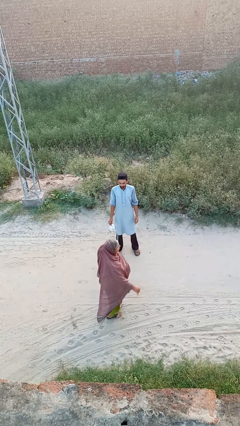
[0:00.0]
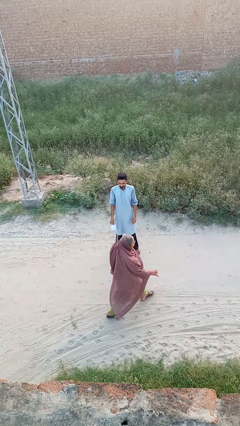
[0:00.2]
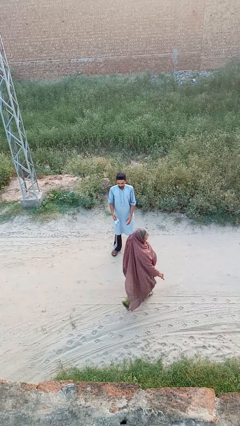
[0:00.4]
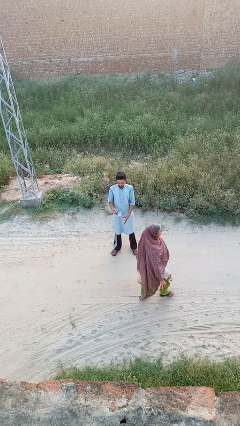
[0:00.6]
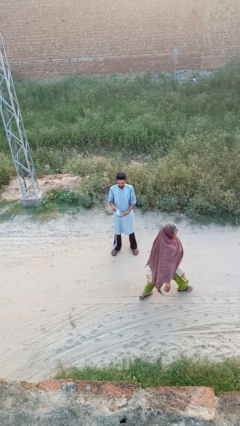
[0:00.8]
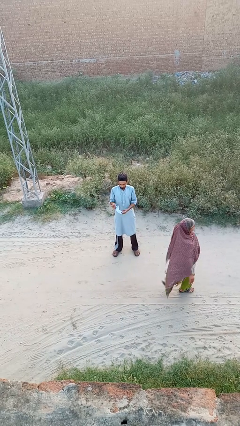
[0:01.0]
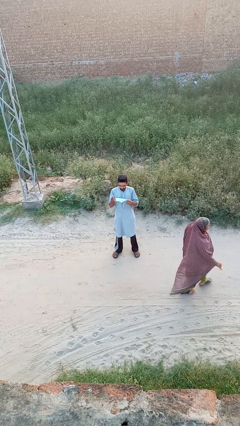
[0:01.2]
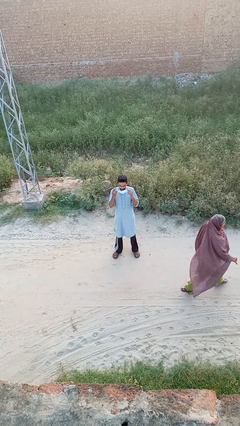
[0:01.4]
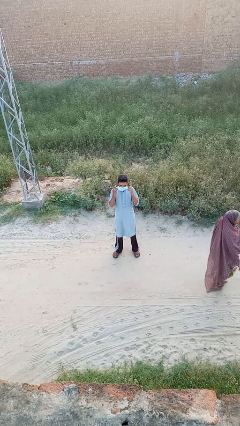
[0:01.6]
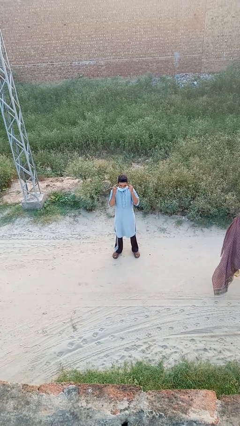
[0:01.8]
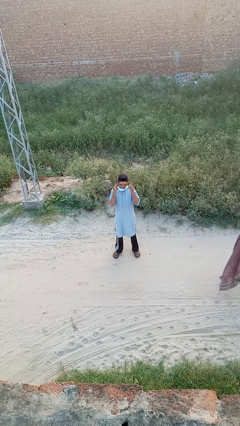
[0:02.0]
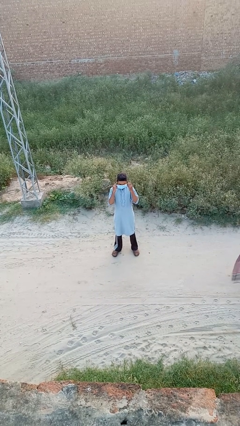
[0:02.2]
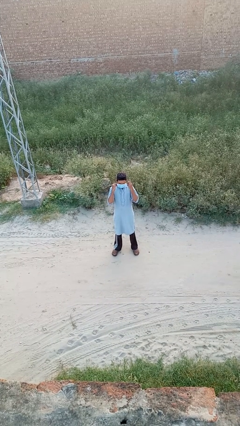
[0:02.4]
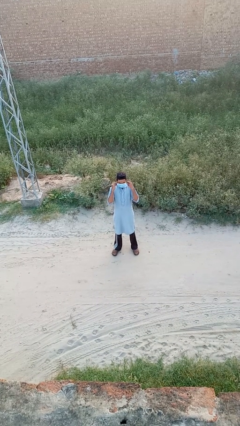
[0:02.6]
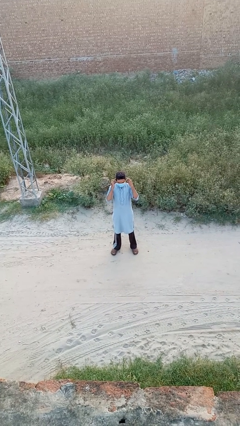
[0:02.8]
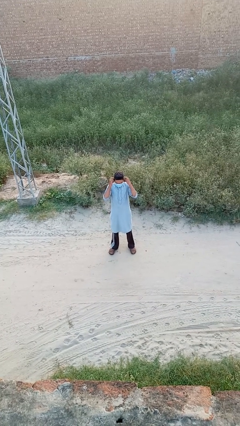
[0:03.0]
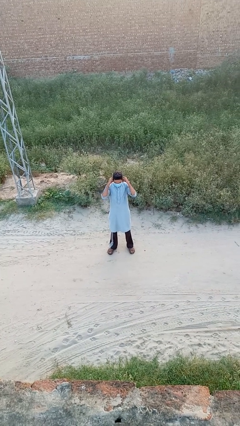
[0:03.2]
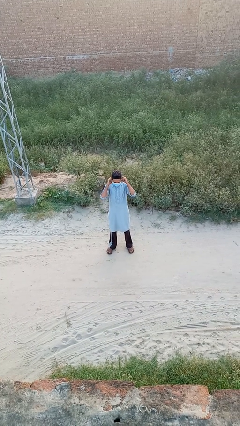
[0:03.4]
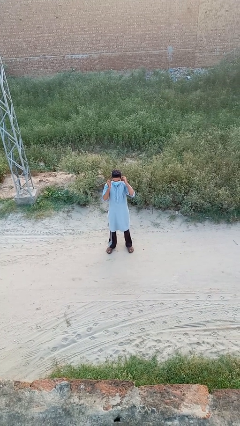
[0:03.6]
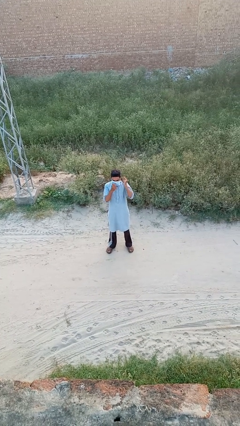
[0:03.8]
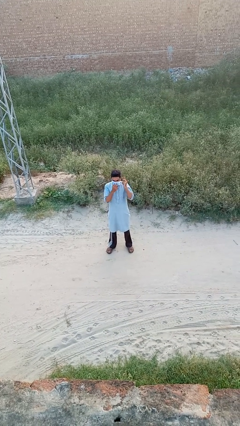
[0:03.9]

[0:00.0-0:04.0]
person puts on facemask

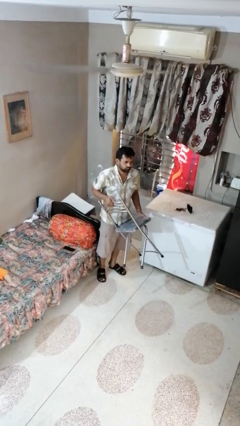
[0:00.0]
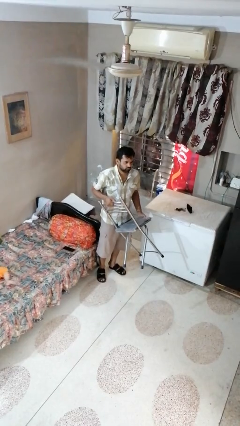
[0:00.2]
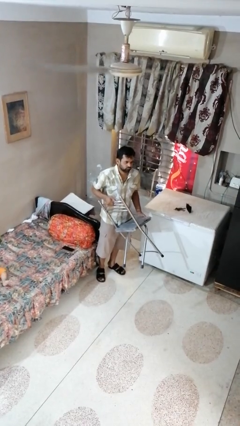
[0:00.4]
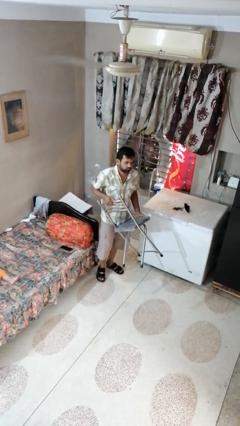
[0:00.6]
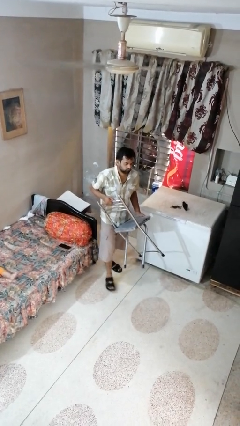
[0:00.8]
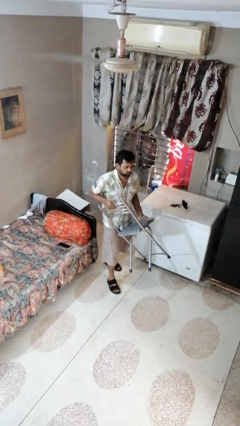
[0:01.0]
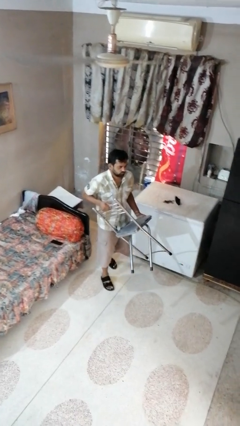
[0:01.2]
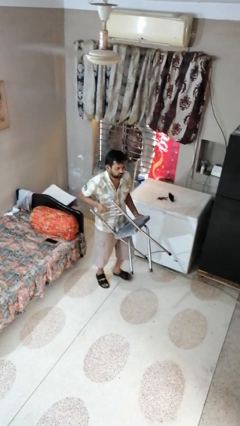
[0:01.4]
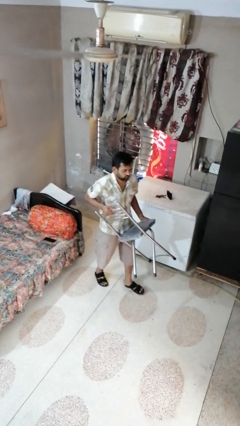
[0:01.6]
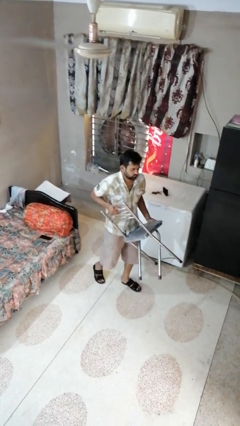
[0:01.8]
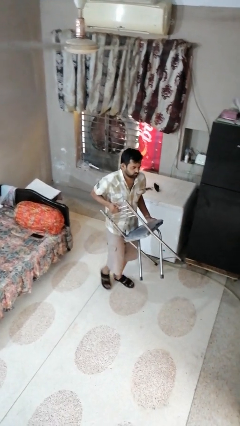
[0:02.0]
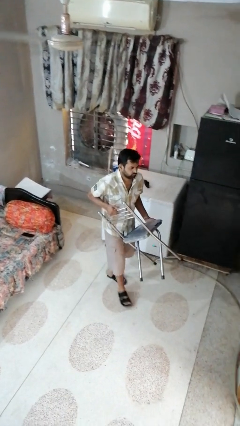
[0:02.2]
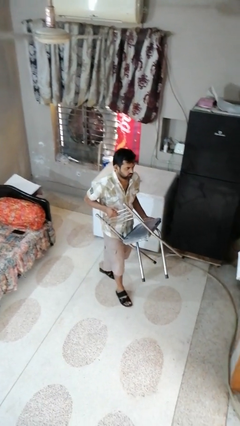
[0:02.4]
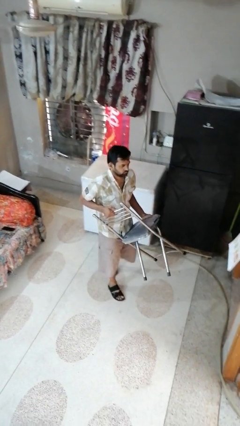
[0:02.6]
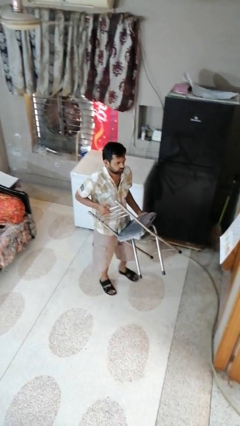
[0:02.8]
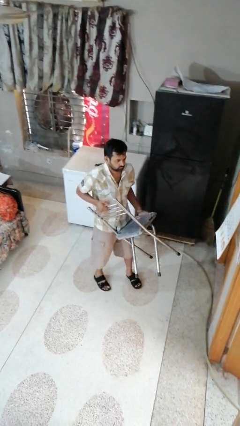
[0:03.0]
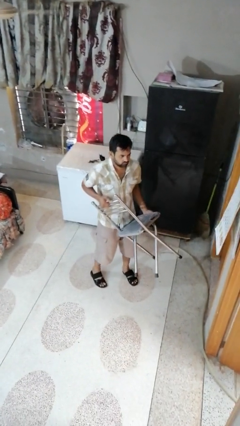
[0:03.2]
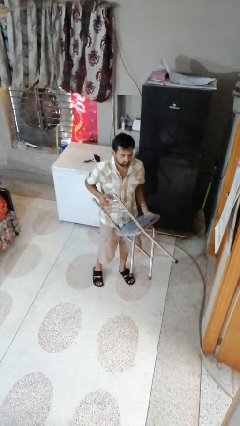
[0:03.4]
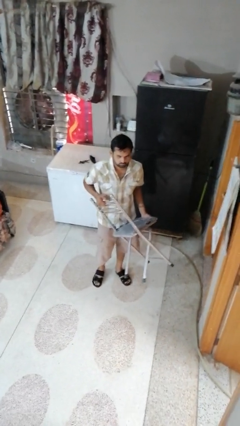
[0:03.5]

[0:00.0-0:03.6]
person carries furniture

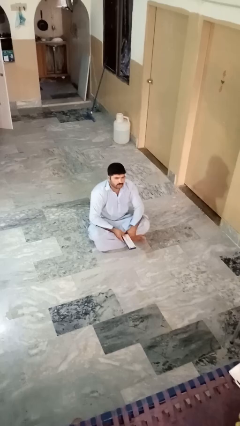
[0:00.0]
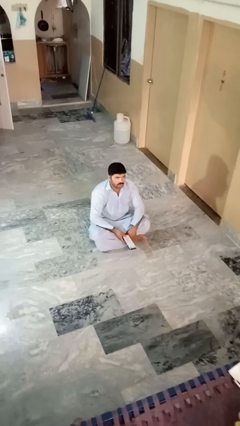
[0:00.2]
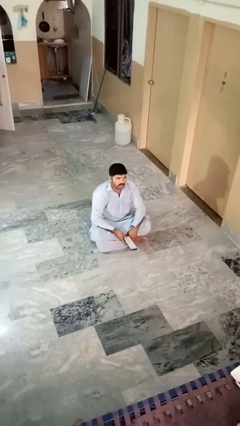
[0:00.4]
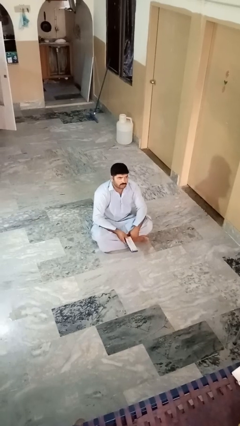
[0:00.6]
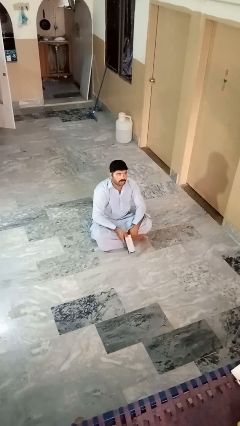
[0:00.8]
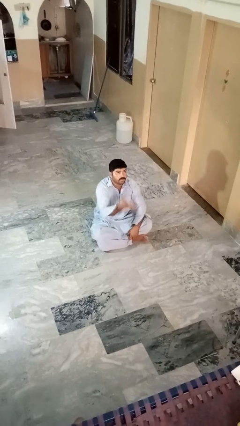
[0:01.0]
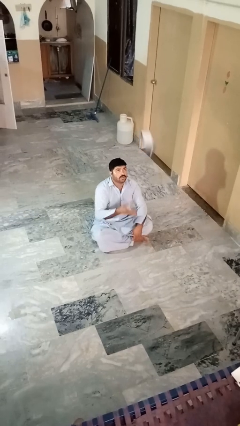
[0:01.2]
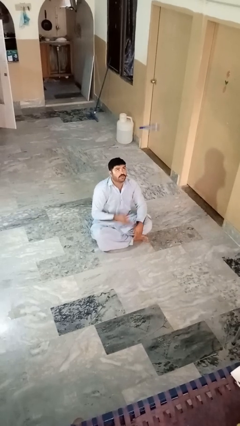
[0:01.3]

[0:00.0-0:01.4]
person drops object

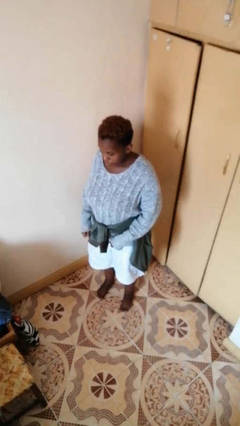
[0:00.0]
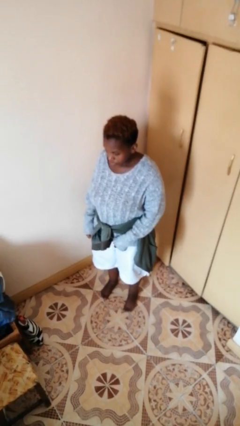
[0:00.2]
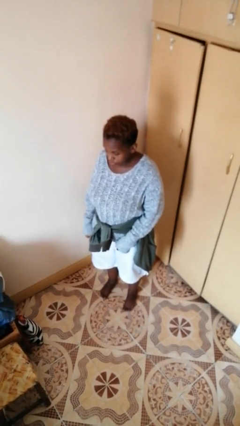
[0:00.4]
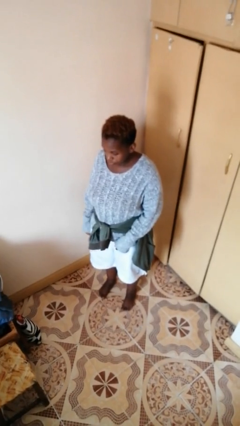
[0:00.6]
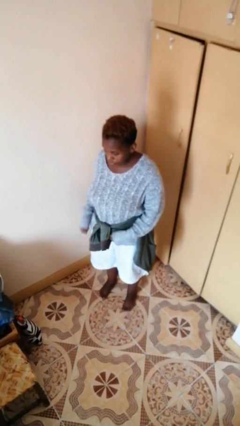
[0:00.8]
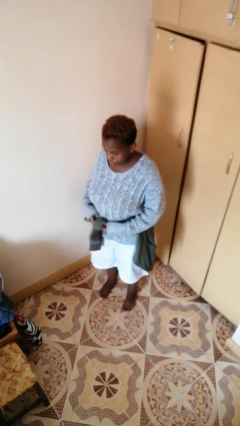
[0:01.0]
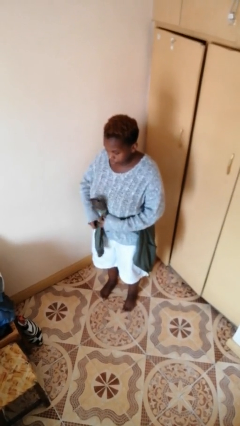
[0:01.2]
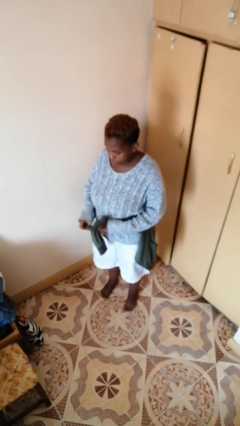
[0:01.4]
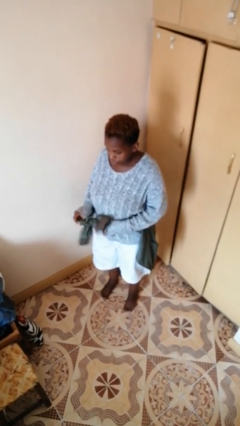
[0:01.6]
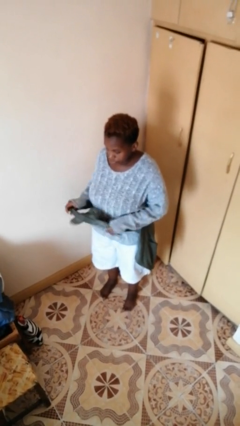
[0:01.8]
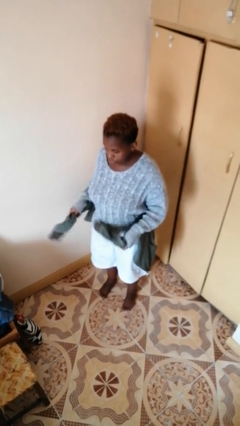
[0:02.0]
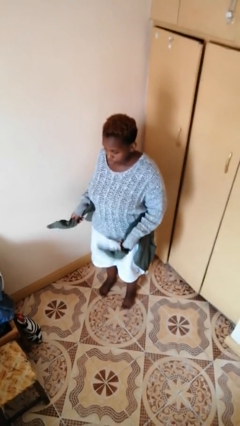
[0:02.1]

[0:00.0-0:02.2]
person unties jacket around waist

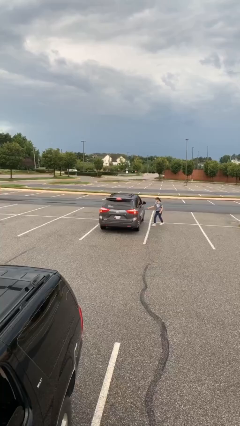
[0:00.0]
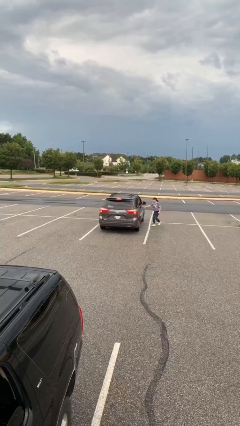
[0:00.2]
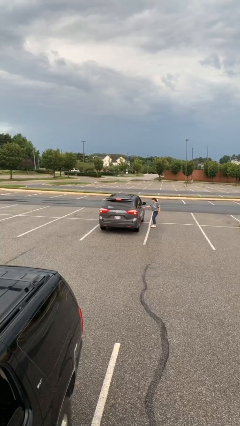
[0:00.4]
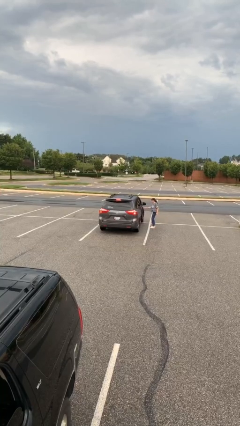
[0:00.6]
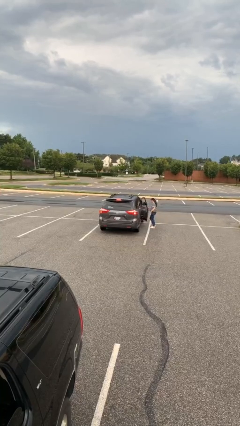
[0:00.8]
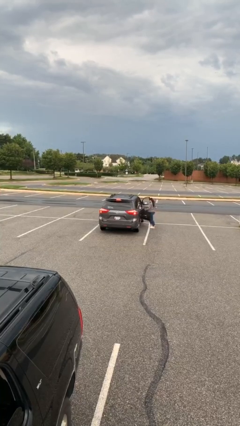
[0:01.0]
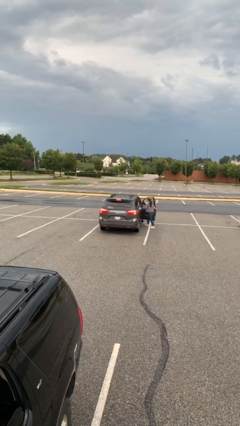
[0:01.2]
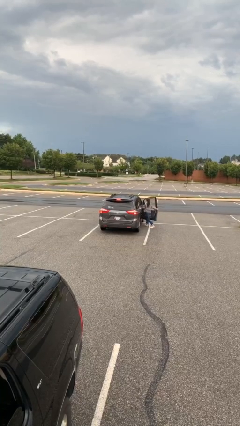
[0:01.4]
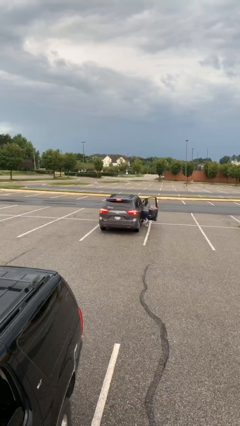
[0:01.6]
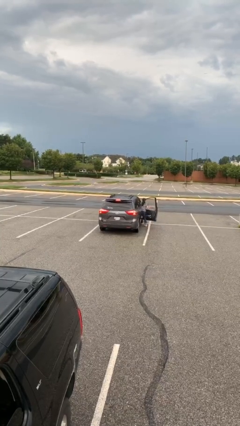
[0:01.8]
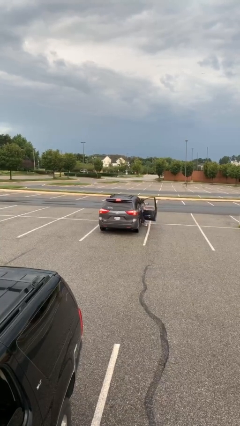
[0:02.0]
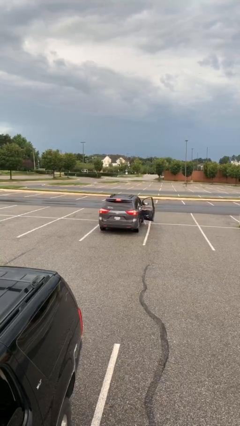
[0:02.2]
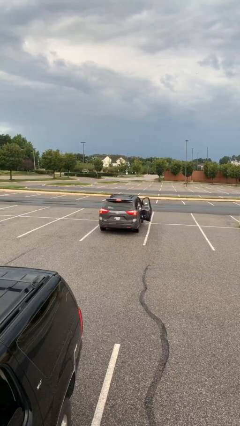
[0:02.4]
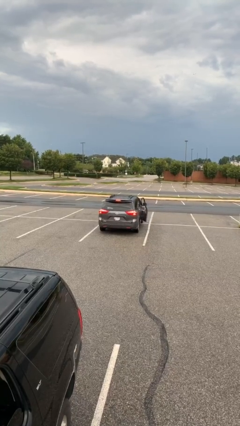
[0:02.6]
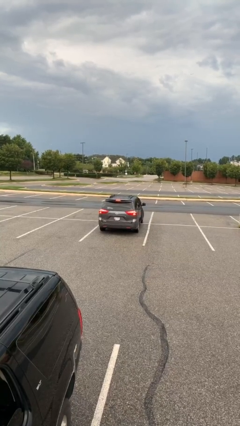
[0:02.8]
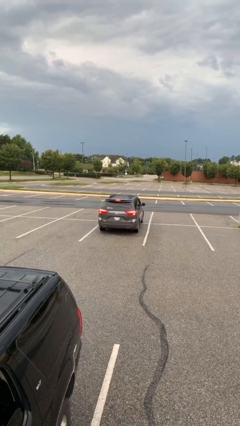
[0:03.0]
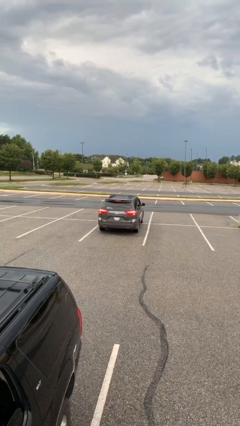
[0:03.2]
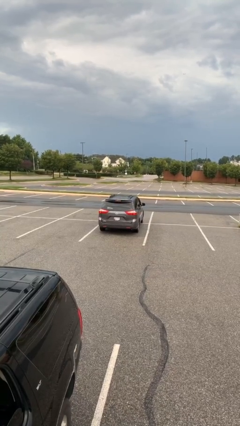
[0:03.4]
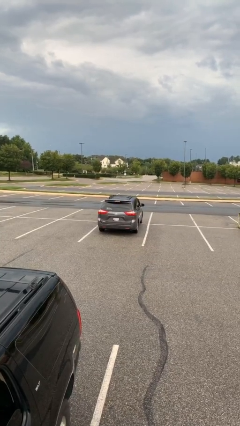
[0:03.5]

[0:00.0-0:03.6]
car picks up person

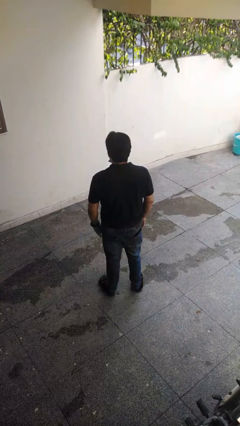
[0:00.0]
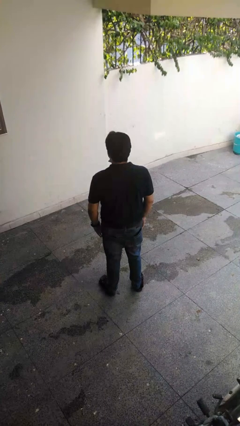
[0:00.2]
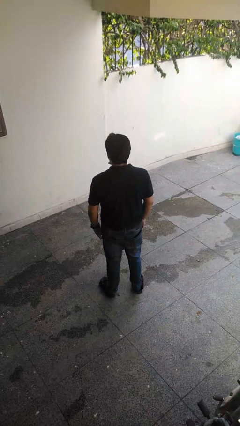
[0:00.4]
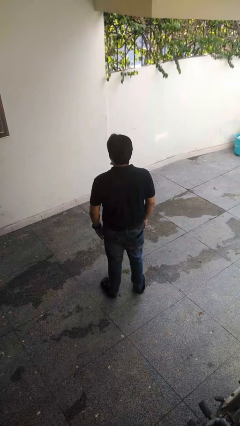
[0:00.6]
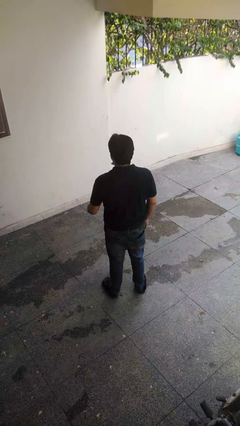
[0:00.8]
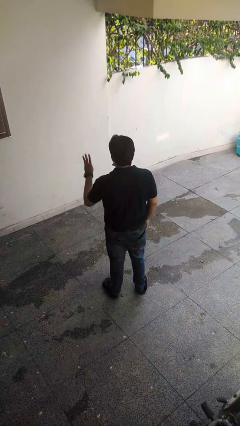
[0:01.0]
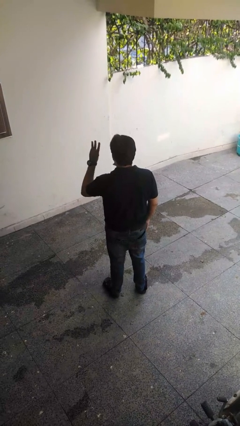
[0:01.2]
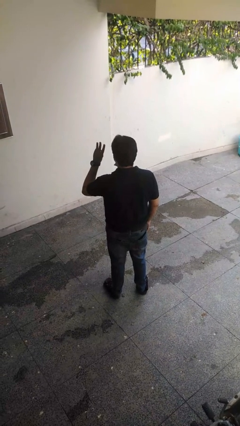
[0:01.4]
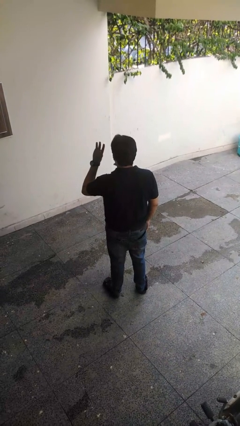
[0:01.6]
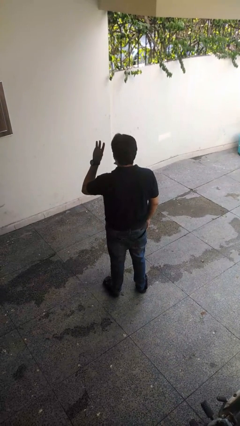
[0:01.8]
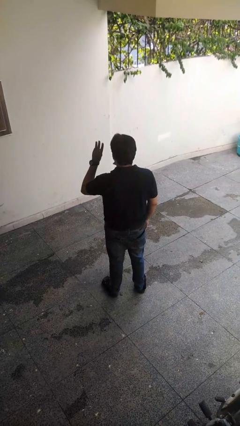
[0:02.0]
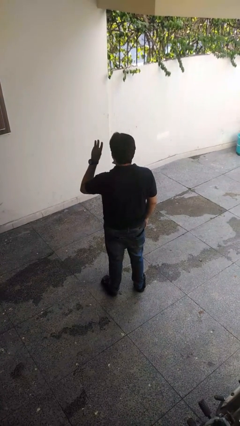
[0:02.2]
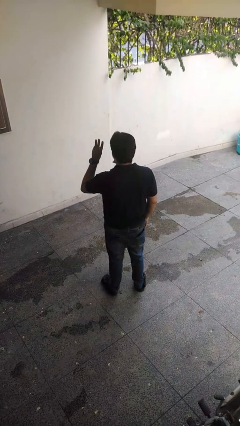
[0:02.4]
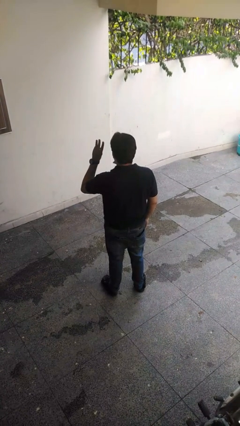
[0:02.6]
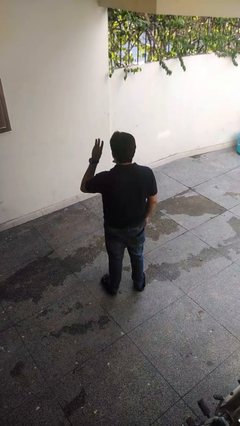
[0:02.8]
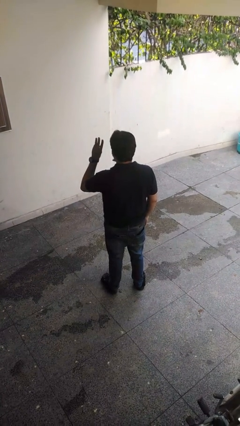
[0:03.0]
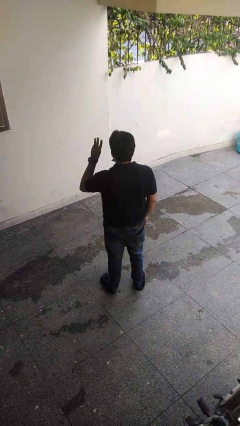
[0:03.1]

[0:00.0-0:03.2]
person gestures number three
